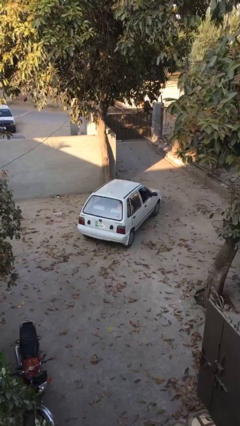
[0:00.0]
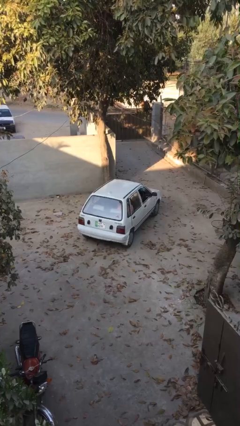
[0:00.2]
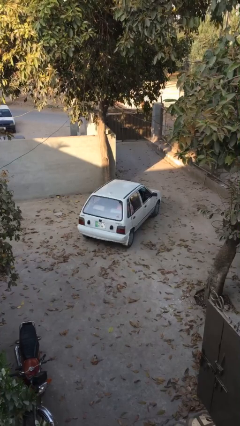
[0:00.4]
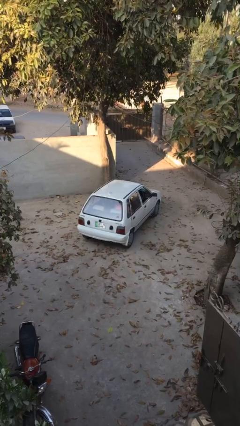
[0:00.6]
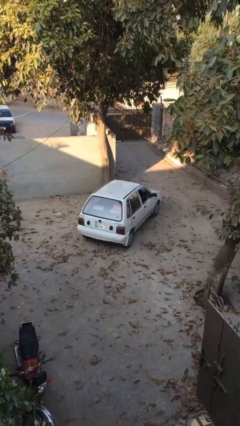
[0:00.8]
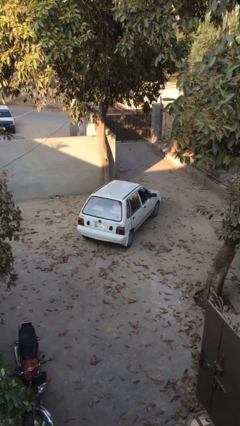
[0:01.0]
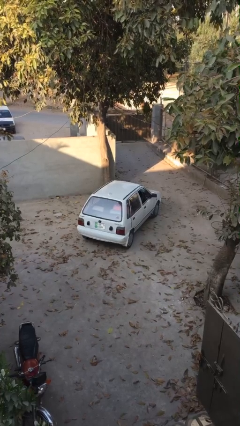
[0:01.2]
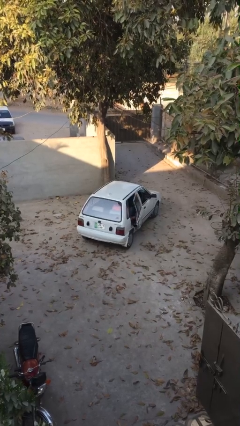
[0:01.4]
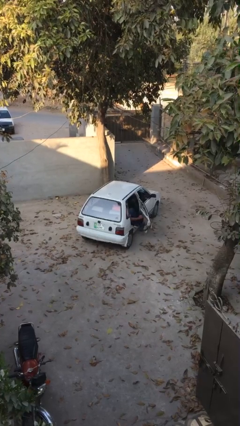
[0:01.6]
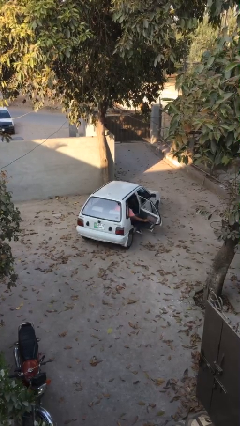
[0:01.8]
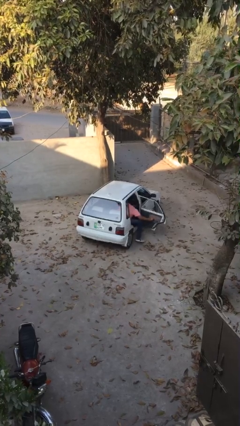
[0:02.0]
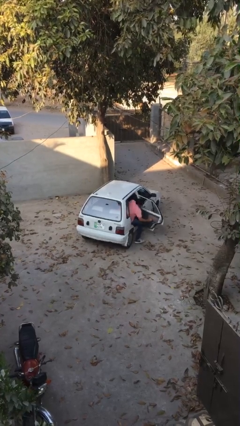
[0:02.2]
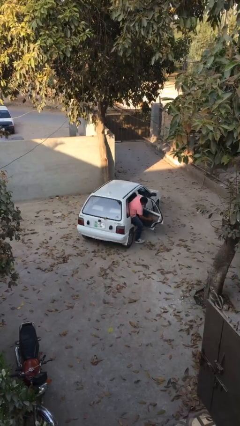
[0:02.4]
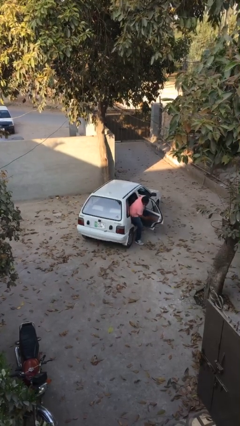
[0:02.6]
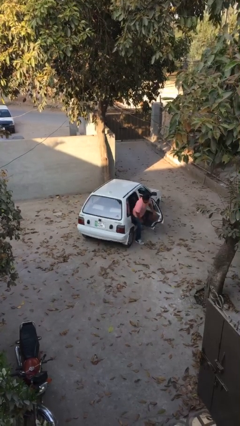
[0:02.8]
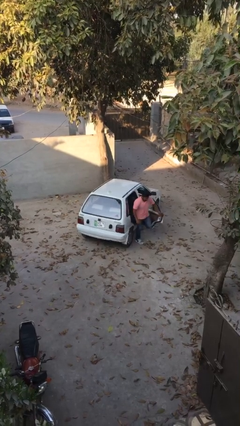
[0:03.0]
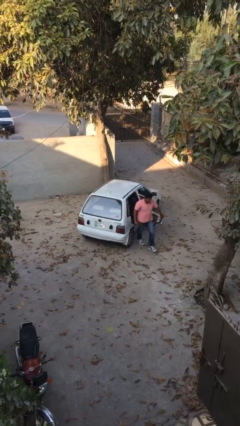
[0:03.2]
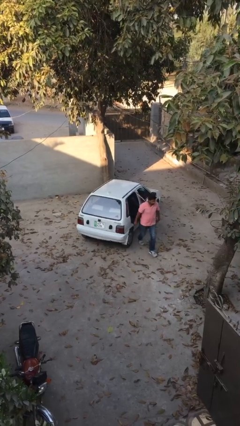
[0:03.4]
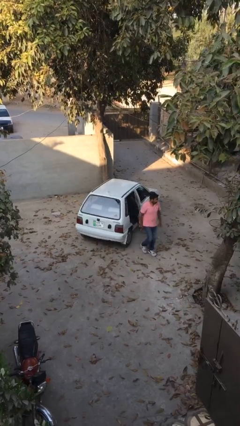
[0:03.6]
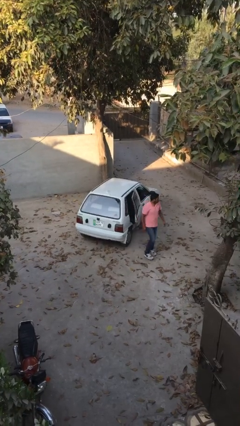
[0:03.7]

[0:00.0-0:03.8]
car drops off person

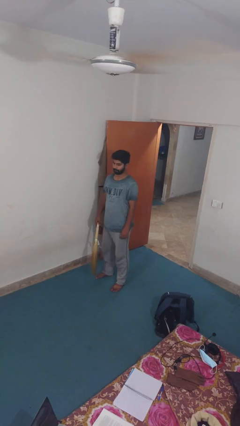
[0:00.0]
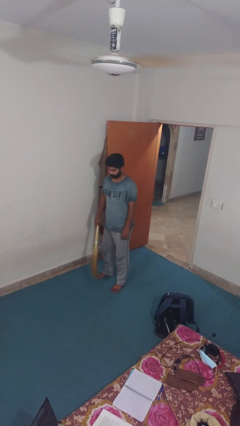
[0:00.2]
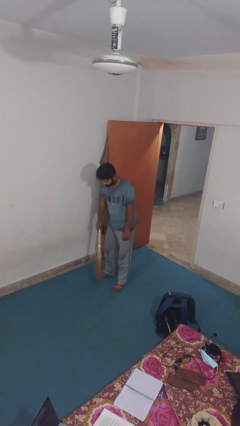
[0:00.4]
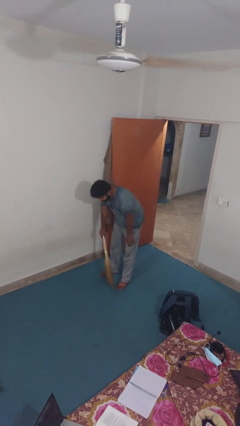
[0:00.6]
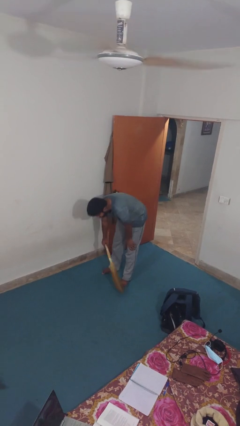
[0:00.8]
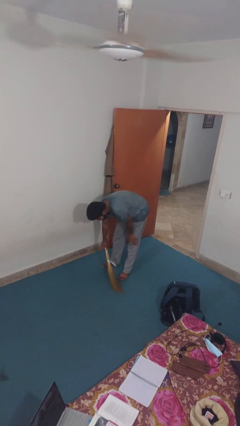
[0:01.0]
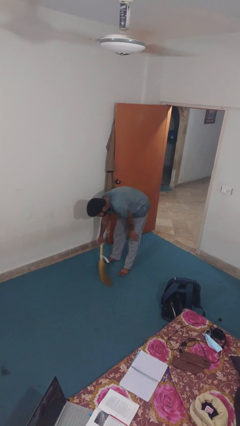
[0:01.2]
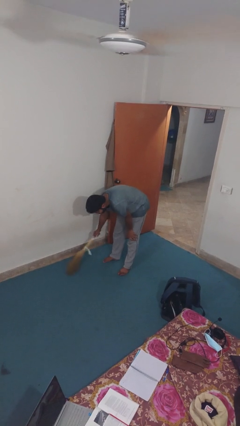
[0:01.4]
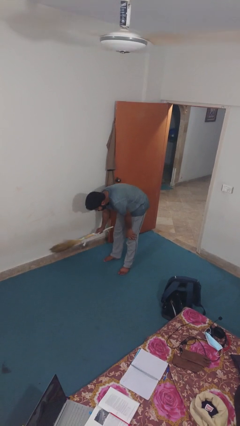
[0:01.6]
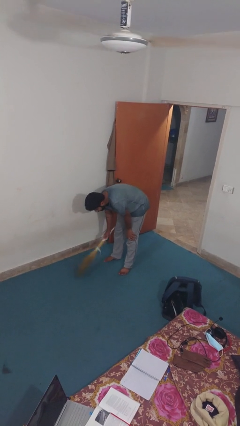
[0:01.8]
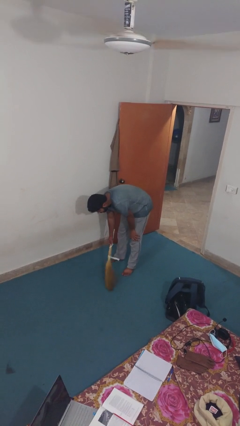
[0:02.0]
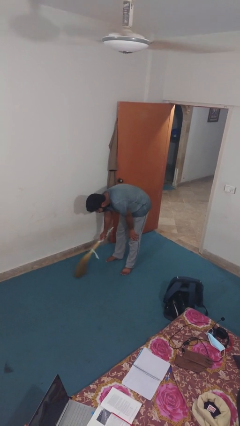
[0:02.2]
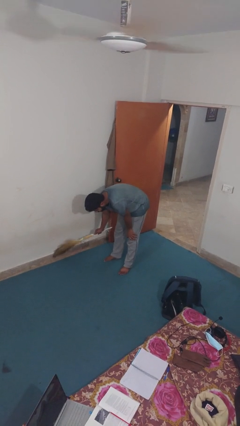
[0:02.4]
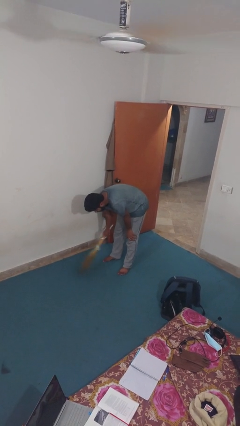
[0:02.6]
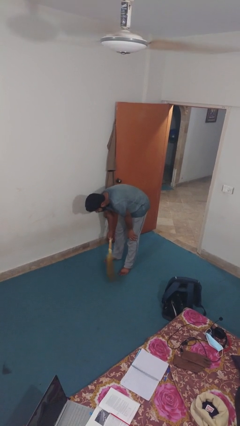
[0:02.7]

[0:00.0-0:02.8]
person sweeps floor

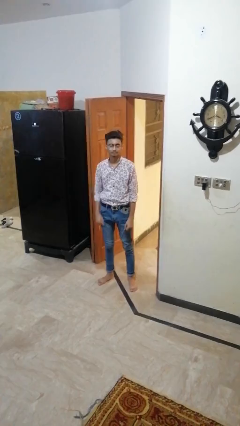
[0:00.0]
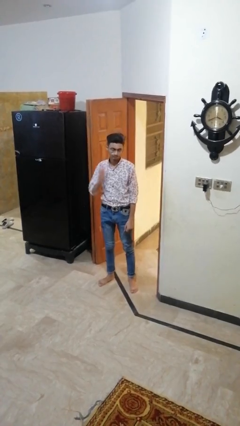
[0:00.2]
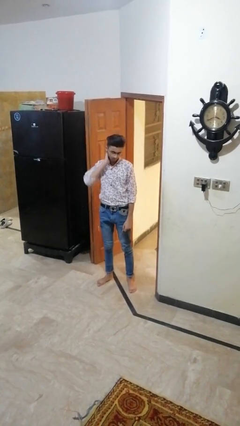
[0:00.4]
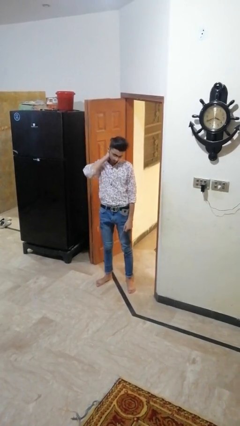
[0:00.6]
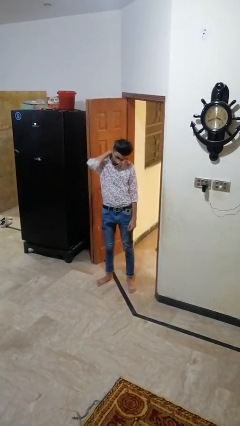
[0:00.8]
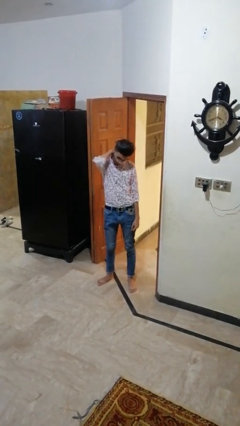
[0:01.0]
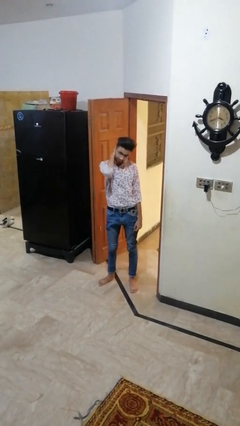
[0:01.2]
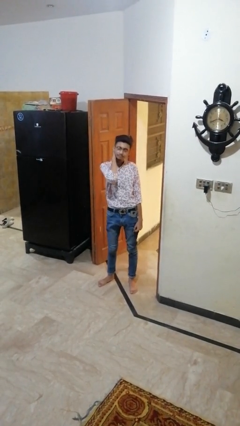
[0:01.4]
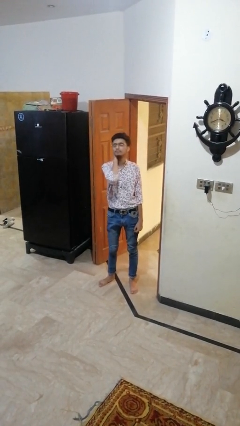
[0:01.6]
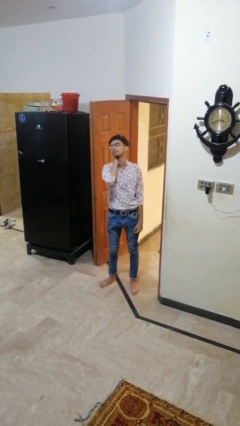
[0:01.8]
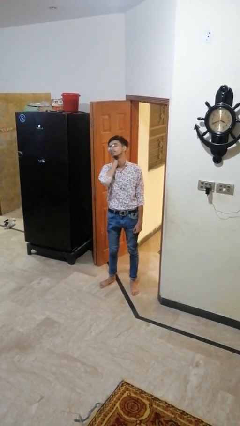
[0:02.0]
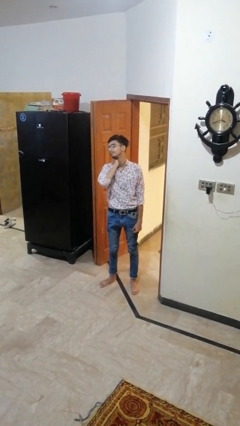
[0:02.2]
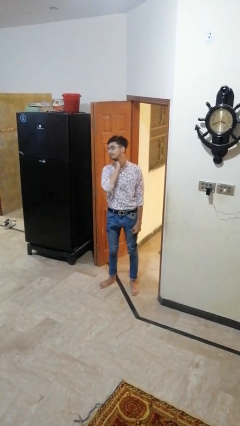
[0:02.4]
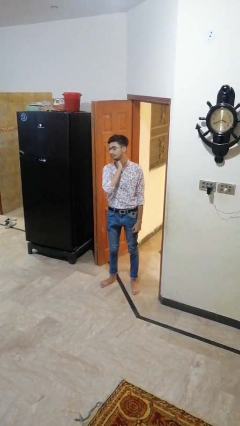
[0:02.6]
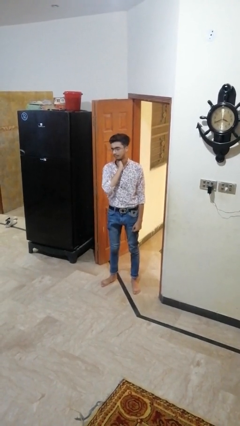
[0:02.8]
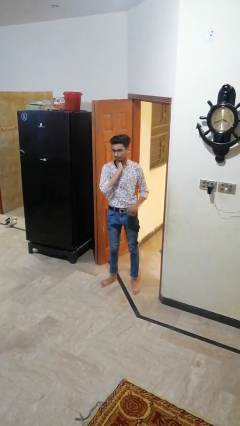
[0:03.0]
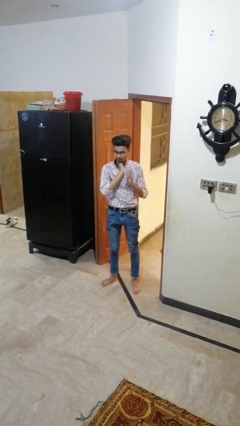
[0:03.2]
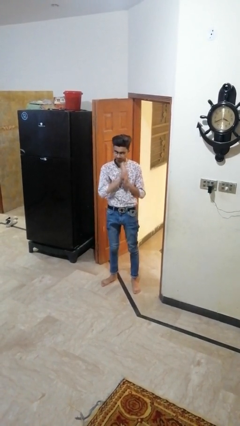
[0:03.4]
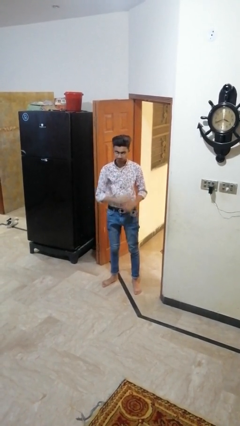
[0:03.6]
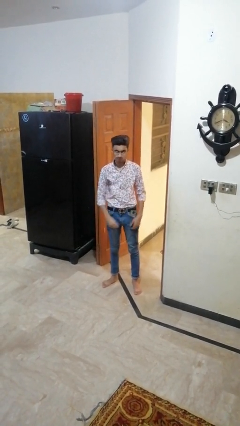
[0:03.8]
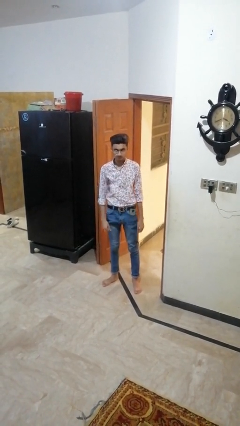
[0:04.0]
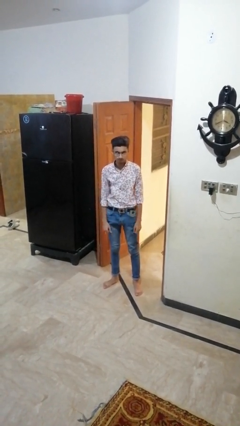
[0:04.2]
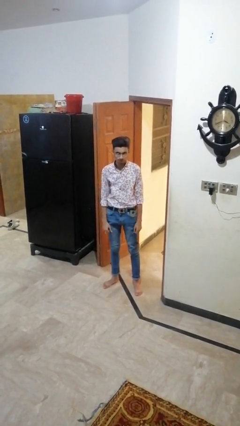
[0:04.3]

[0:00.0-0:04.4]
person rubs neck

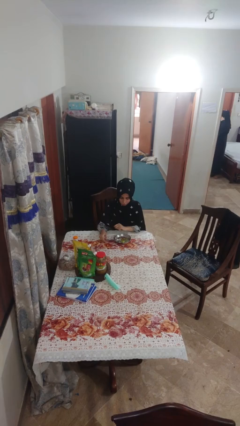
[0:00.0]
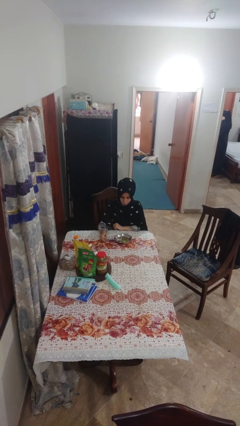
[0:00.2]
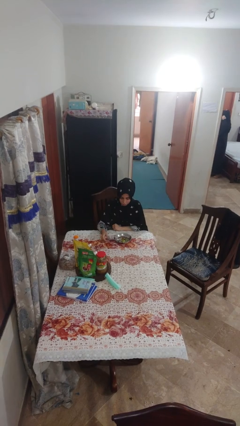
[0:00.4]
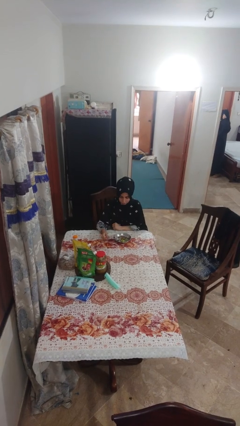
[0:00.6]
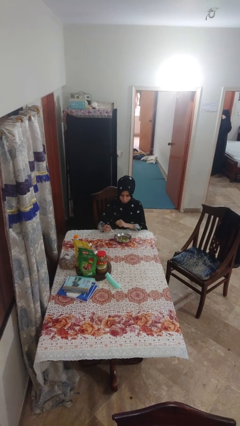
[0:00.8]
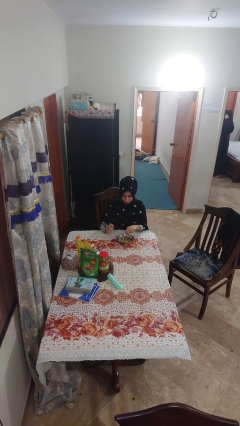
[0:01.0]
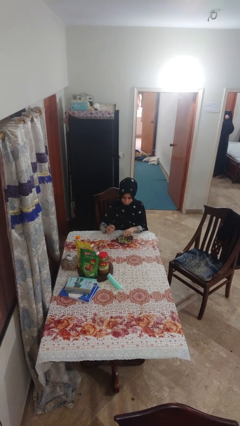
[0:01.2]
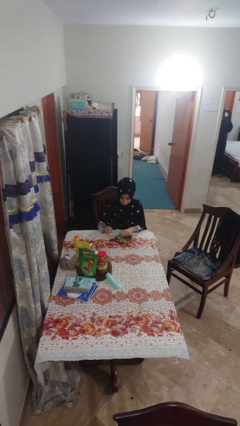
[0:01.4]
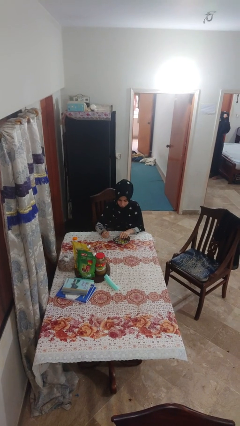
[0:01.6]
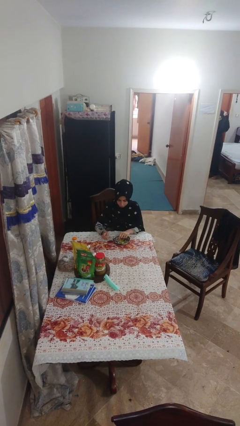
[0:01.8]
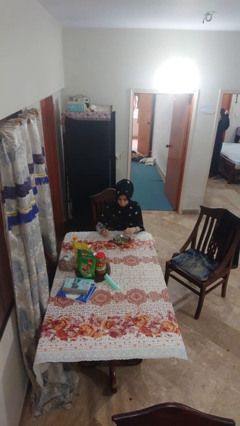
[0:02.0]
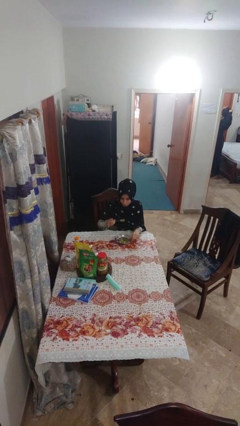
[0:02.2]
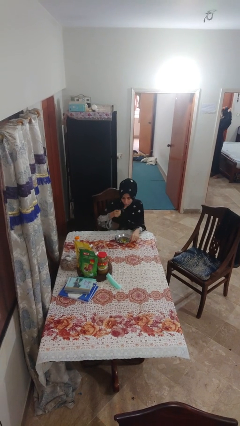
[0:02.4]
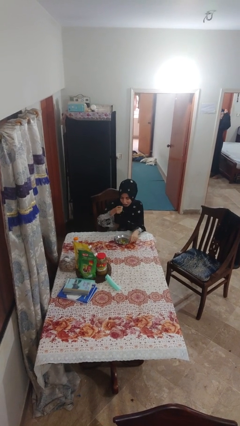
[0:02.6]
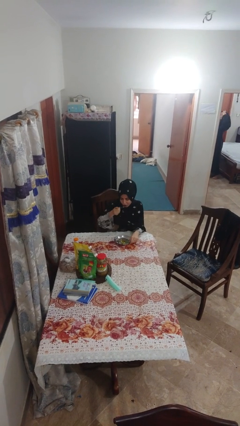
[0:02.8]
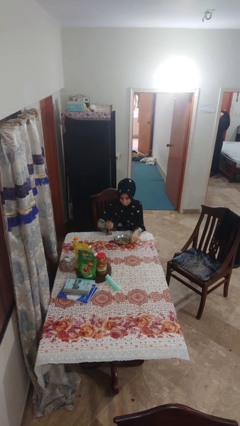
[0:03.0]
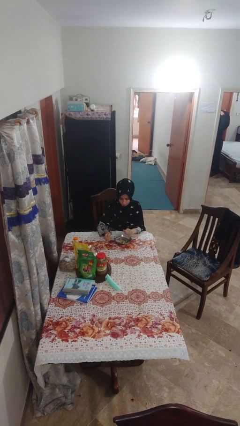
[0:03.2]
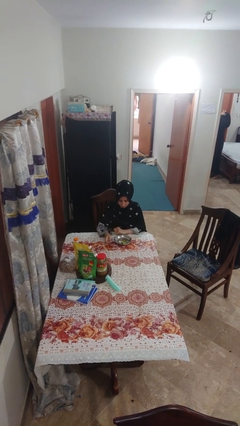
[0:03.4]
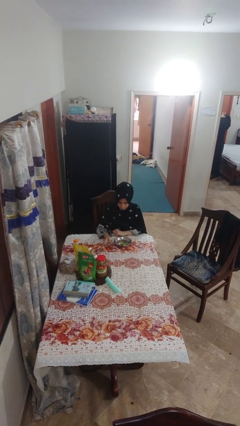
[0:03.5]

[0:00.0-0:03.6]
person eats with utensil

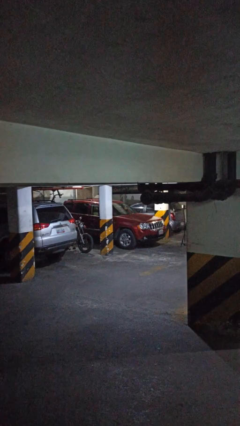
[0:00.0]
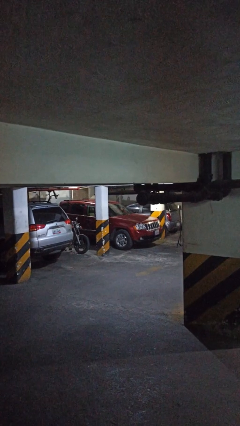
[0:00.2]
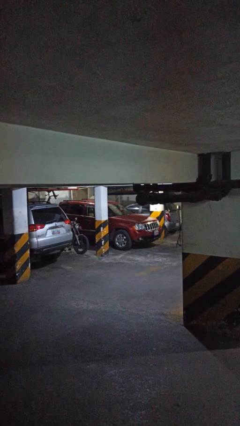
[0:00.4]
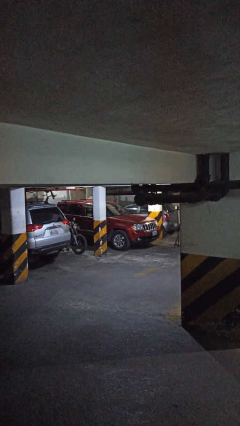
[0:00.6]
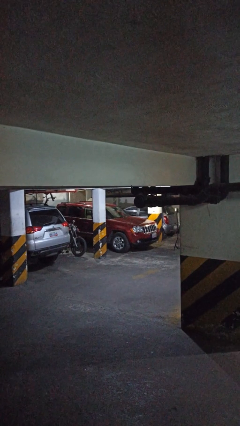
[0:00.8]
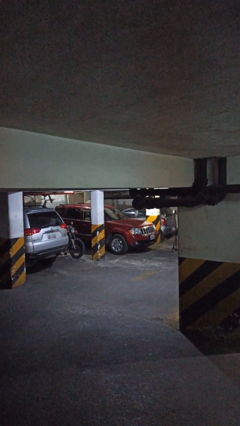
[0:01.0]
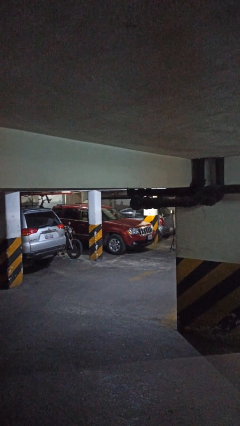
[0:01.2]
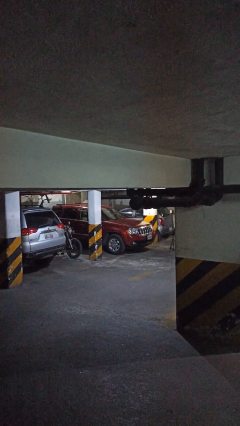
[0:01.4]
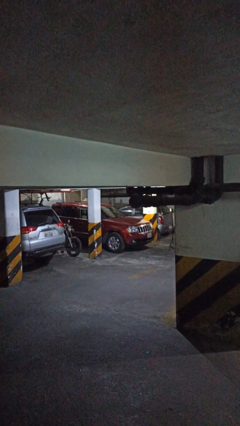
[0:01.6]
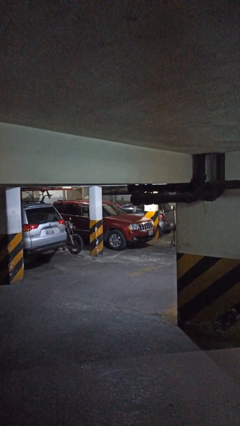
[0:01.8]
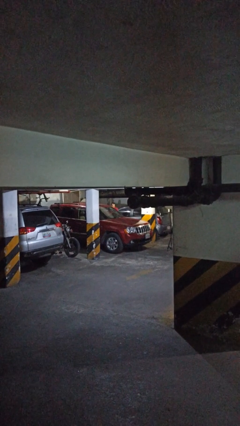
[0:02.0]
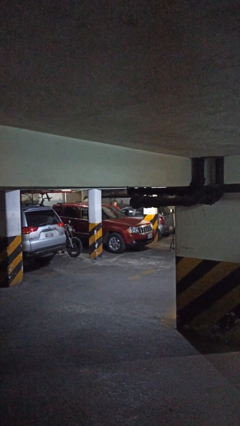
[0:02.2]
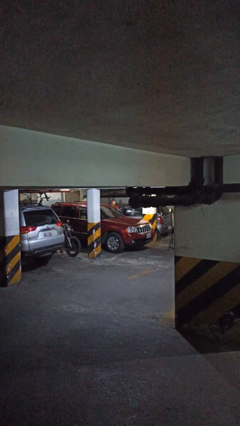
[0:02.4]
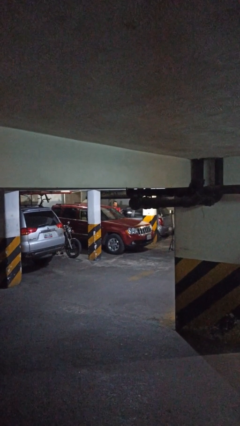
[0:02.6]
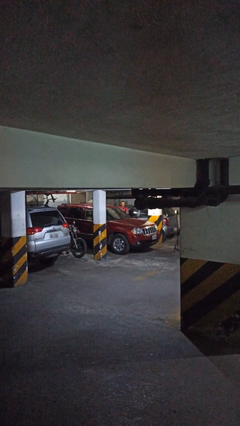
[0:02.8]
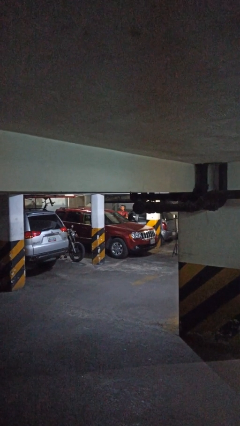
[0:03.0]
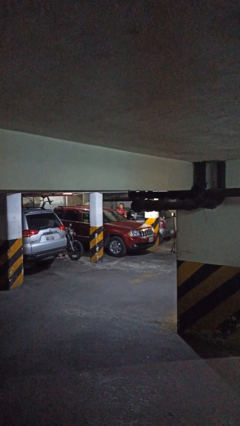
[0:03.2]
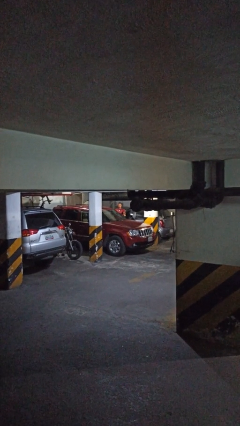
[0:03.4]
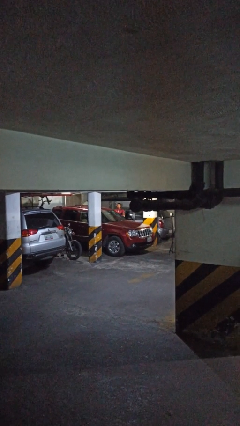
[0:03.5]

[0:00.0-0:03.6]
person exits car
